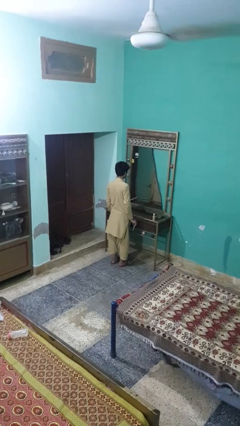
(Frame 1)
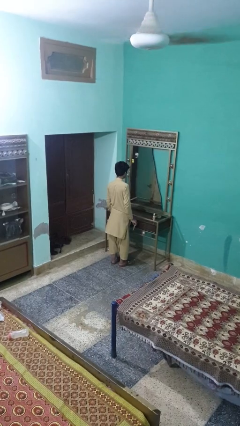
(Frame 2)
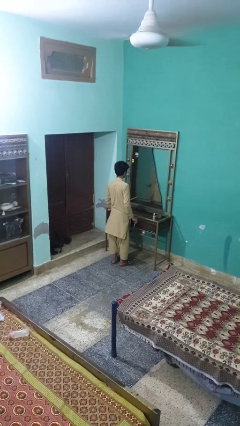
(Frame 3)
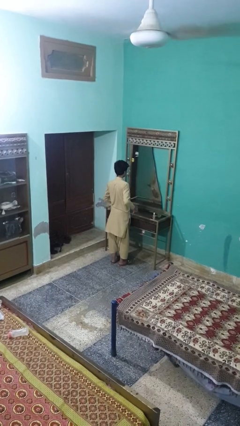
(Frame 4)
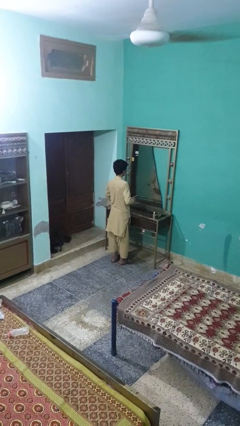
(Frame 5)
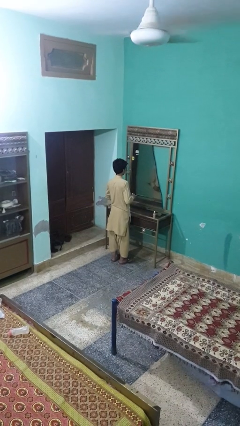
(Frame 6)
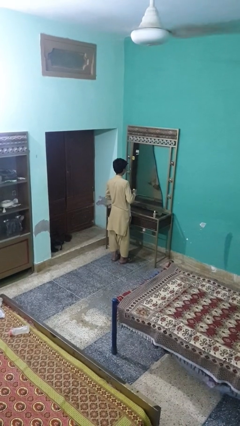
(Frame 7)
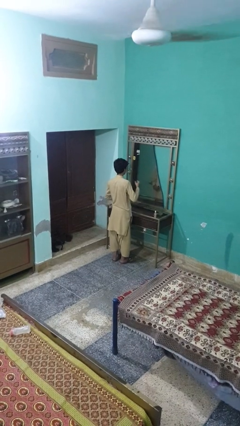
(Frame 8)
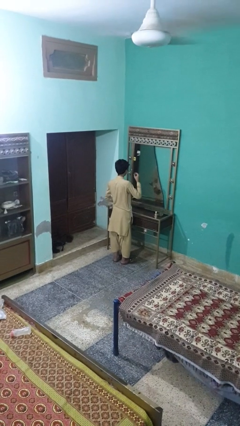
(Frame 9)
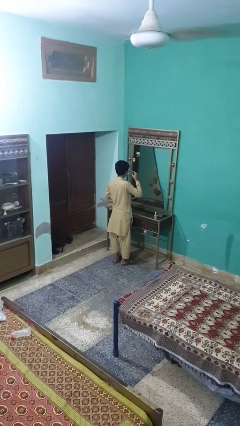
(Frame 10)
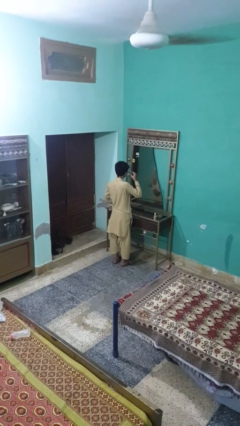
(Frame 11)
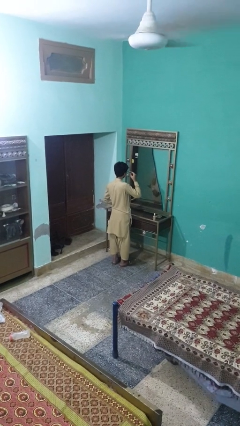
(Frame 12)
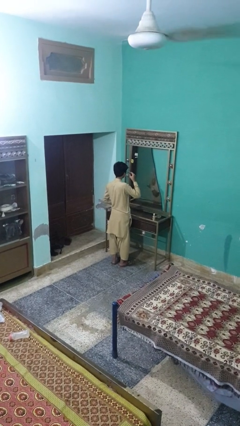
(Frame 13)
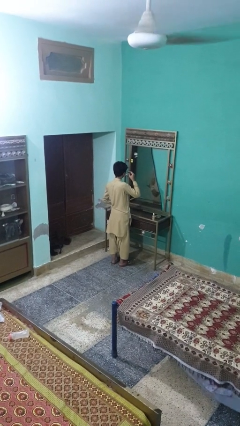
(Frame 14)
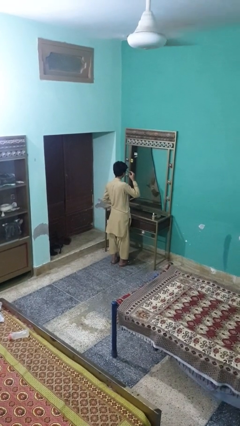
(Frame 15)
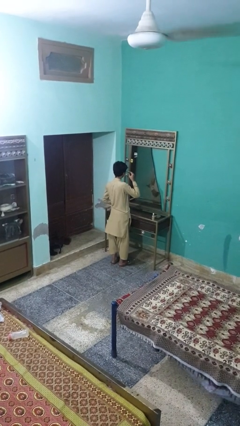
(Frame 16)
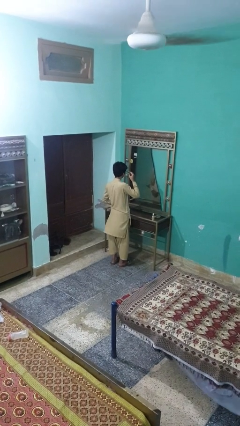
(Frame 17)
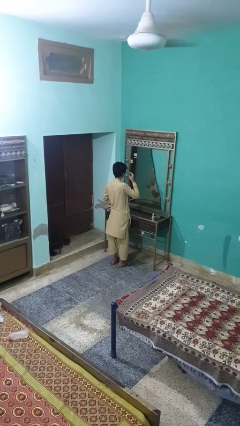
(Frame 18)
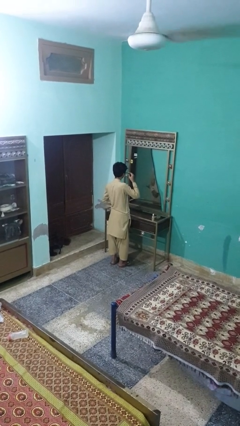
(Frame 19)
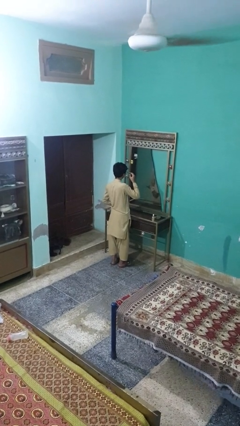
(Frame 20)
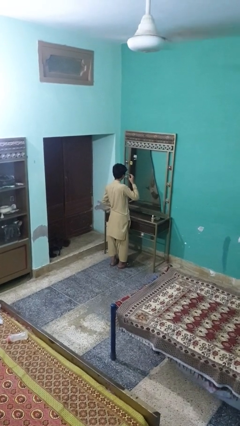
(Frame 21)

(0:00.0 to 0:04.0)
person applies eye makeup

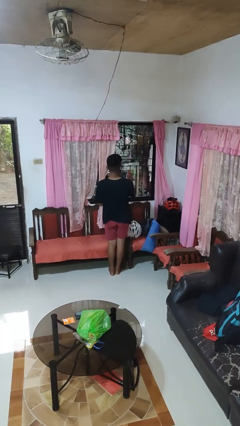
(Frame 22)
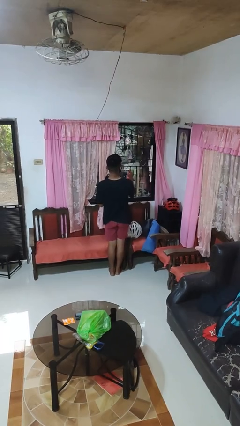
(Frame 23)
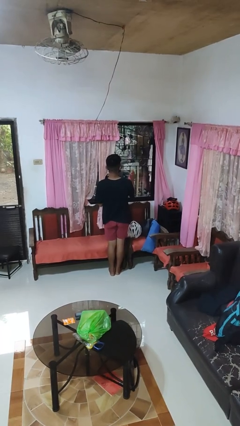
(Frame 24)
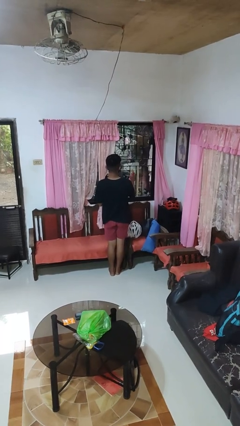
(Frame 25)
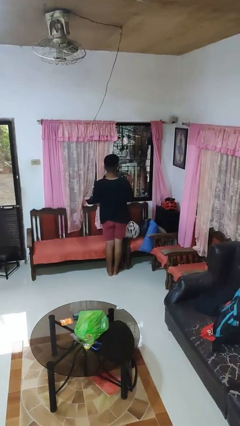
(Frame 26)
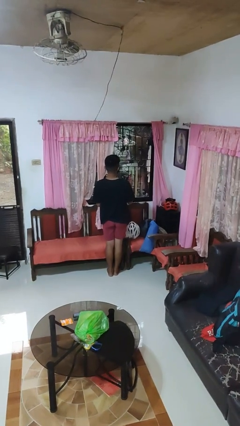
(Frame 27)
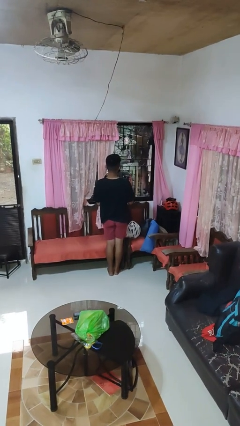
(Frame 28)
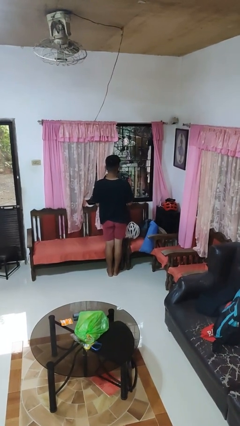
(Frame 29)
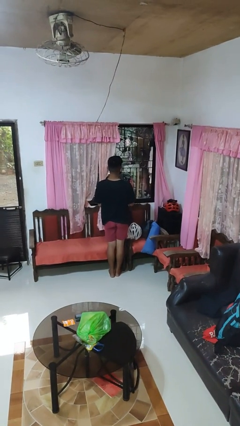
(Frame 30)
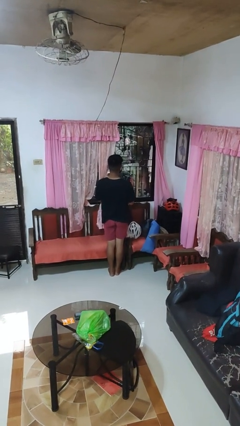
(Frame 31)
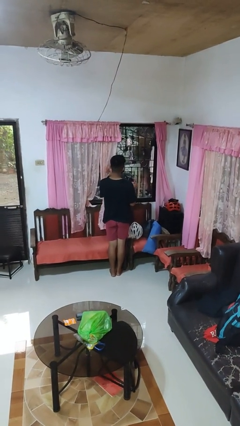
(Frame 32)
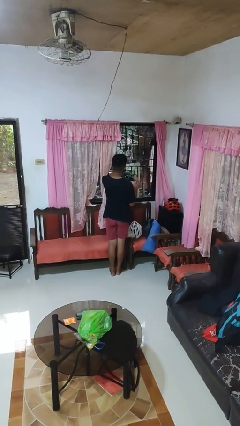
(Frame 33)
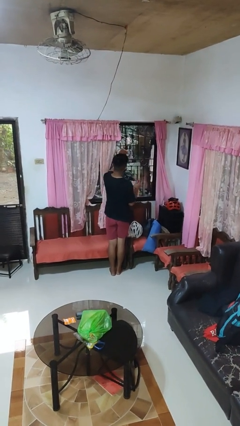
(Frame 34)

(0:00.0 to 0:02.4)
person sprays from bottle

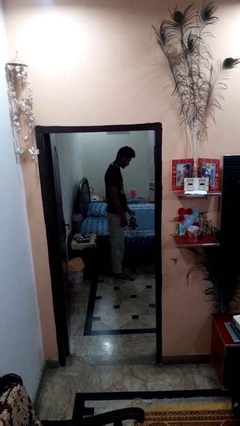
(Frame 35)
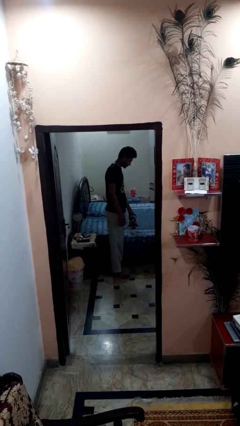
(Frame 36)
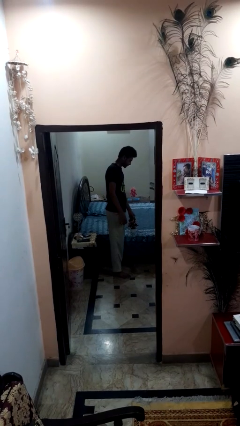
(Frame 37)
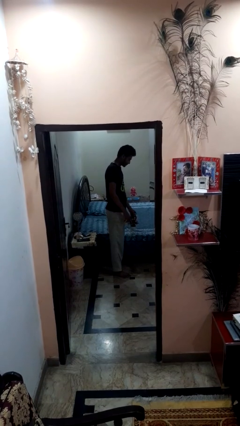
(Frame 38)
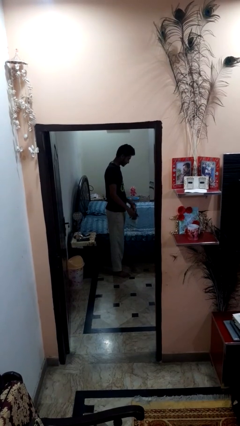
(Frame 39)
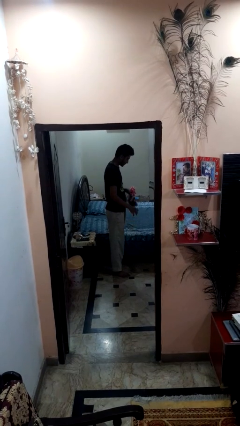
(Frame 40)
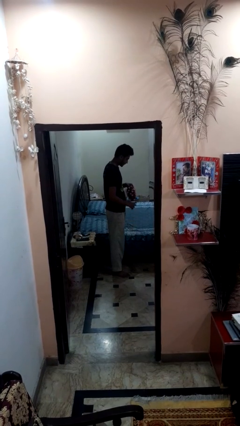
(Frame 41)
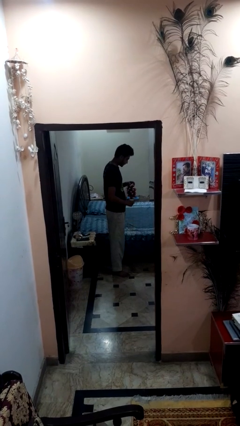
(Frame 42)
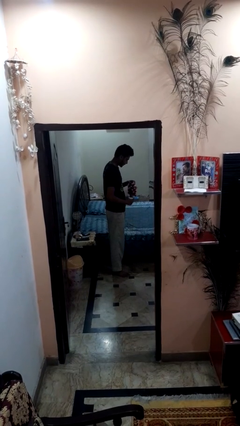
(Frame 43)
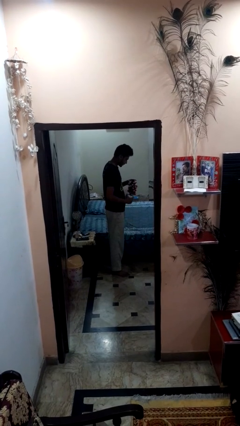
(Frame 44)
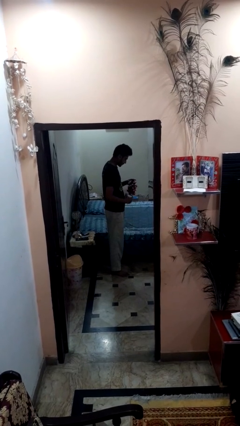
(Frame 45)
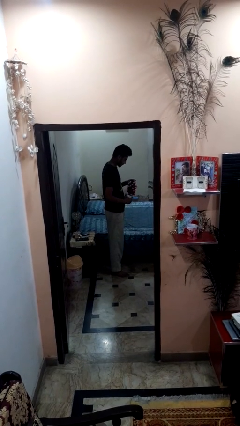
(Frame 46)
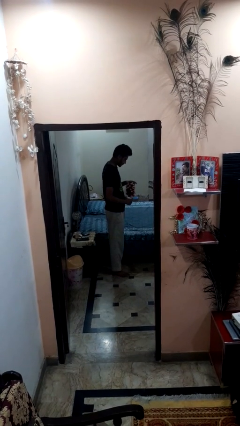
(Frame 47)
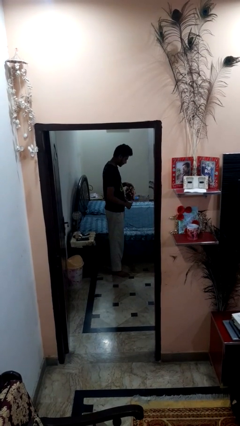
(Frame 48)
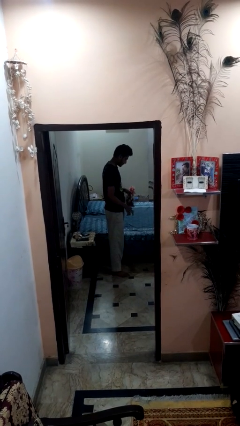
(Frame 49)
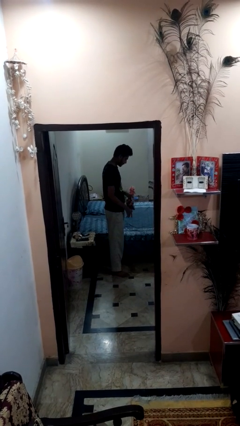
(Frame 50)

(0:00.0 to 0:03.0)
person picks up object from bed

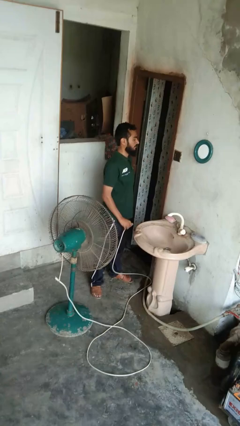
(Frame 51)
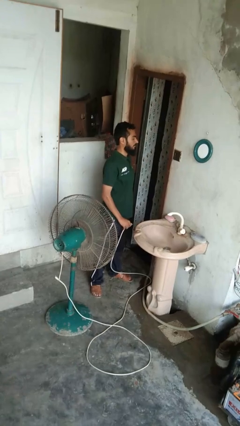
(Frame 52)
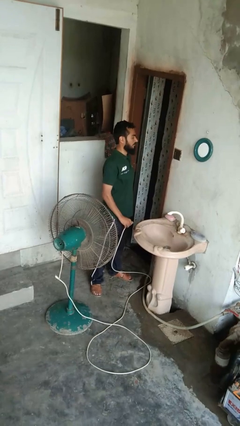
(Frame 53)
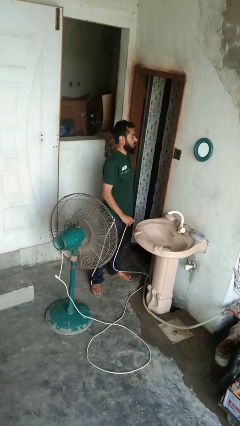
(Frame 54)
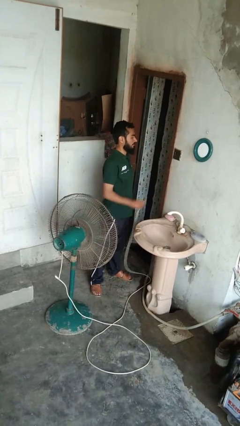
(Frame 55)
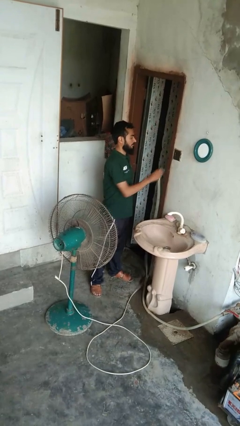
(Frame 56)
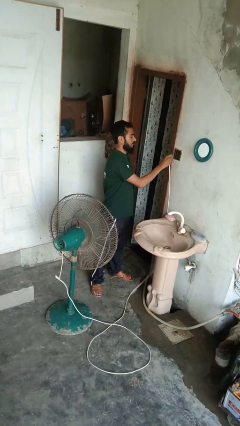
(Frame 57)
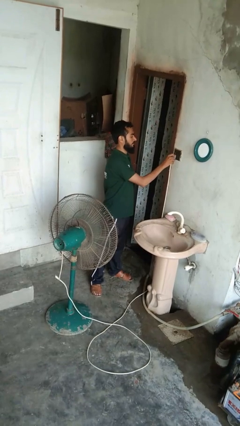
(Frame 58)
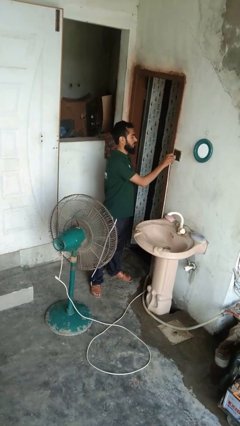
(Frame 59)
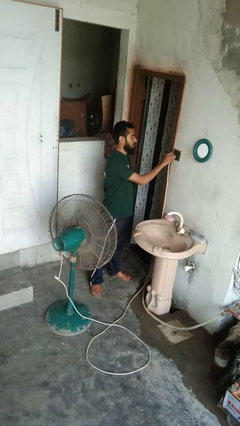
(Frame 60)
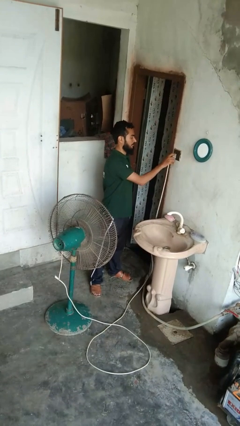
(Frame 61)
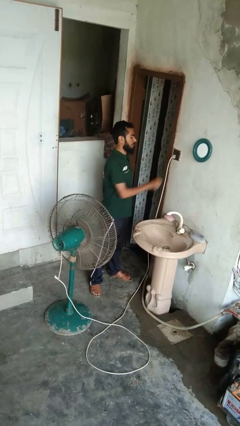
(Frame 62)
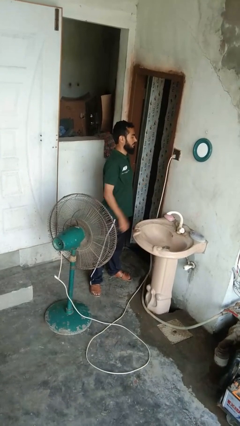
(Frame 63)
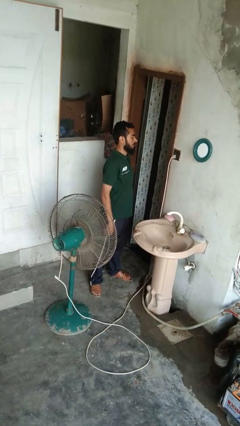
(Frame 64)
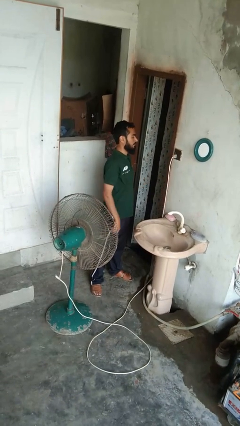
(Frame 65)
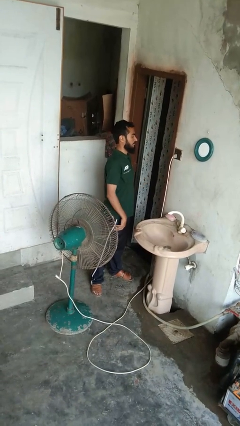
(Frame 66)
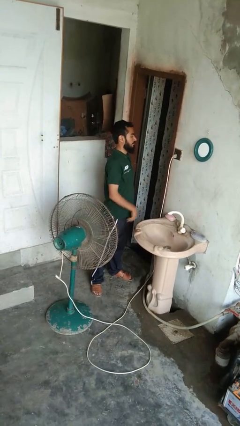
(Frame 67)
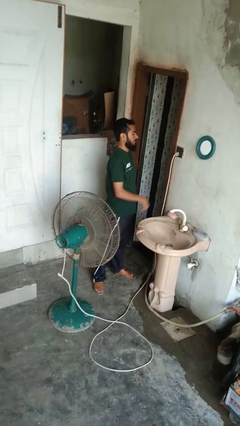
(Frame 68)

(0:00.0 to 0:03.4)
person turns on fan

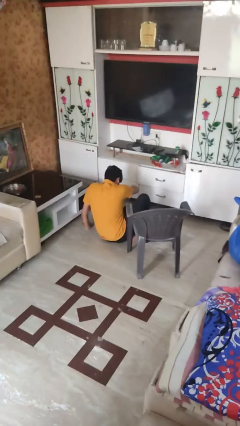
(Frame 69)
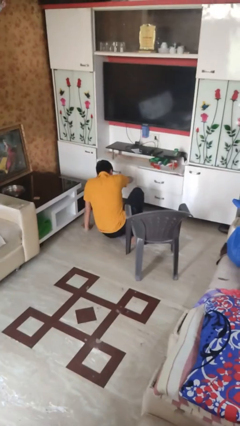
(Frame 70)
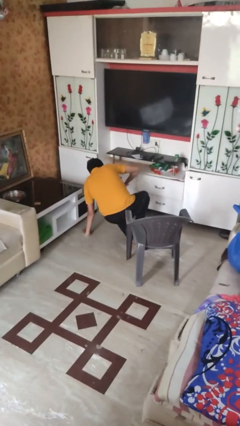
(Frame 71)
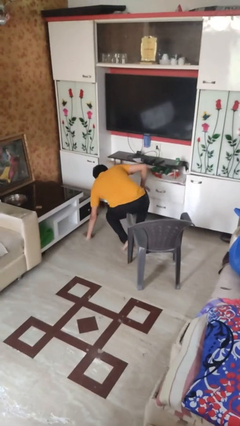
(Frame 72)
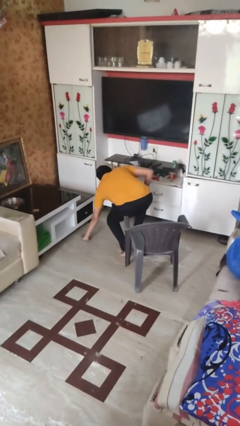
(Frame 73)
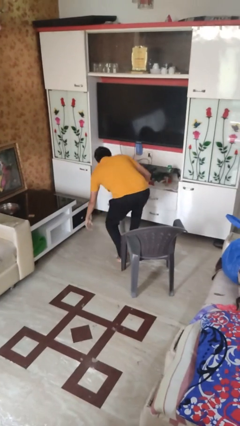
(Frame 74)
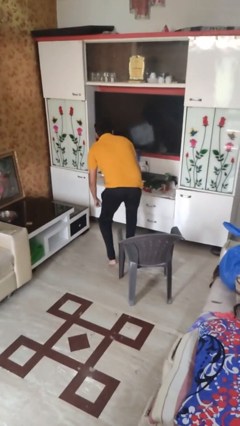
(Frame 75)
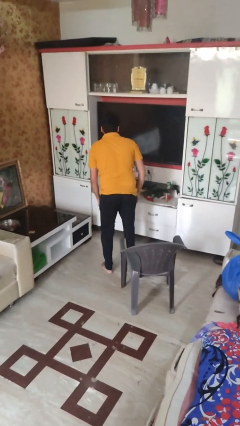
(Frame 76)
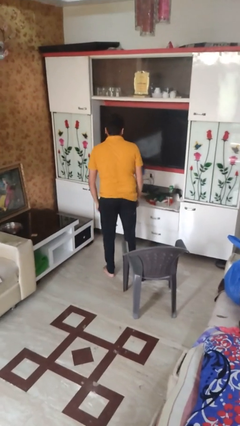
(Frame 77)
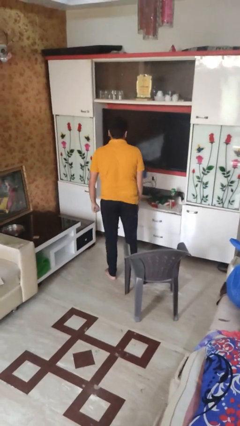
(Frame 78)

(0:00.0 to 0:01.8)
person stands up from floor

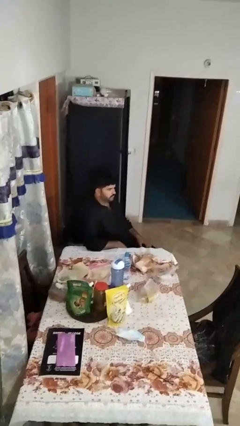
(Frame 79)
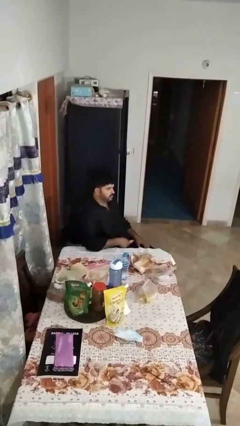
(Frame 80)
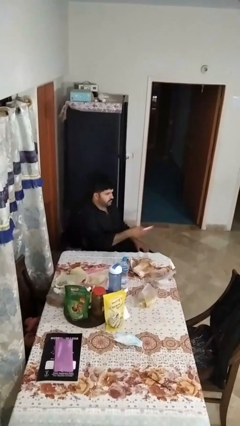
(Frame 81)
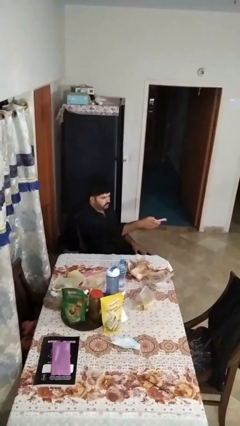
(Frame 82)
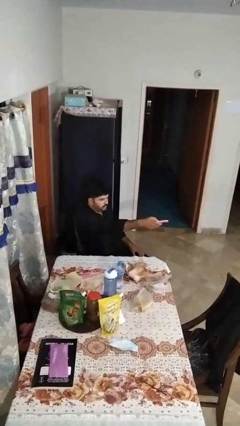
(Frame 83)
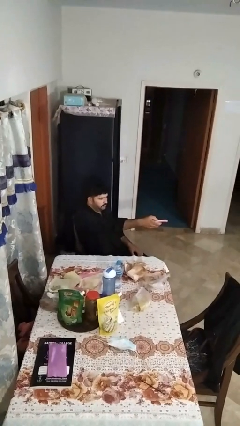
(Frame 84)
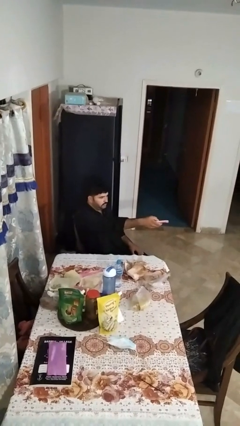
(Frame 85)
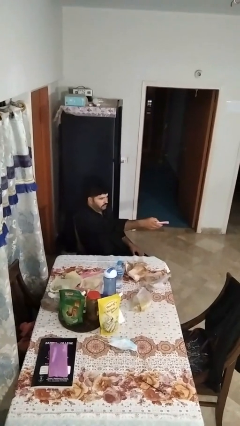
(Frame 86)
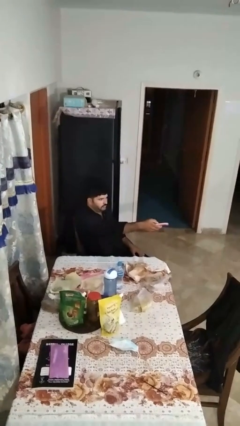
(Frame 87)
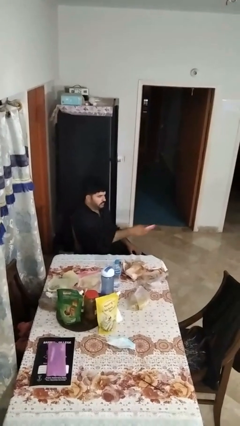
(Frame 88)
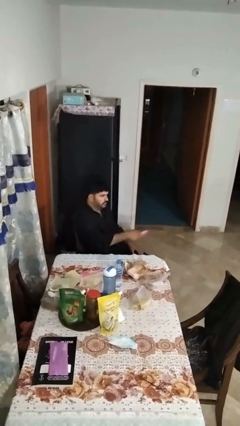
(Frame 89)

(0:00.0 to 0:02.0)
person uses television remote

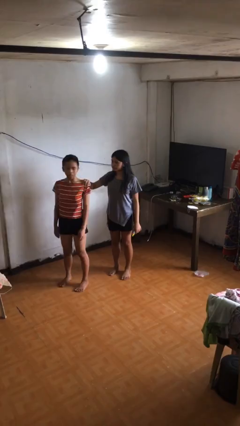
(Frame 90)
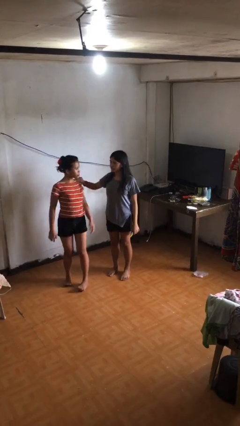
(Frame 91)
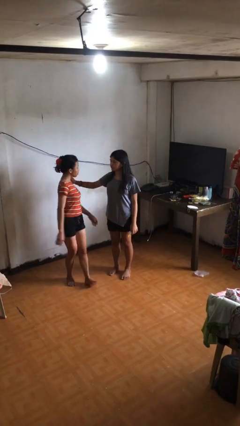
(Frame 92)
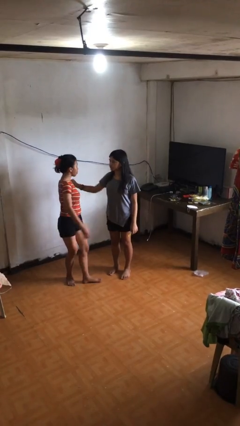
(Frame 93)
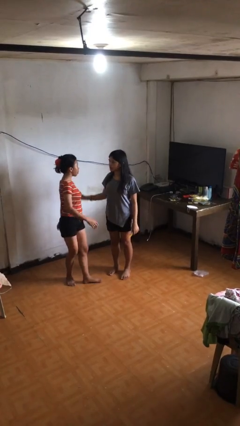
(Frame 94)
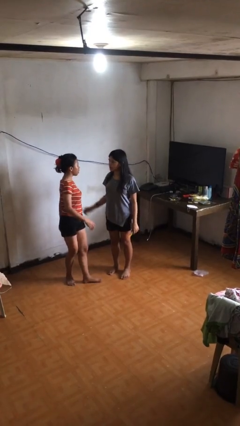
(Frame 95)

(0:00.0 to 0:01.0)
person spins person around
